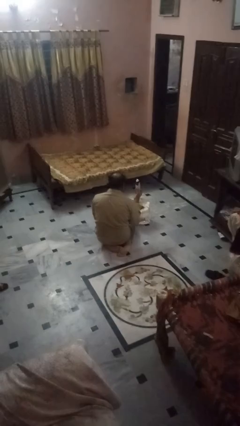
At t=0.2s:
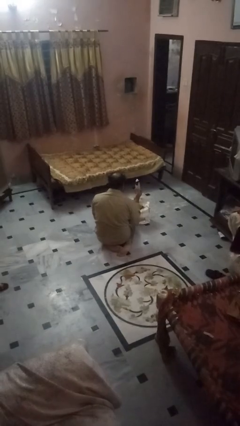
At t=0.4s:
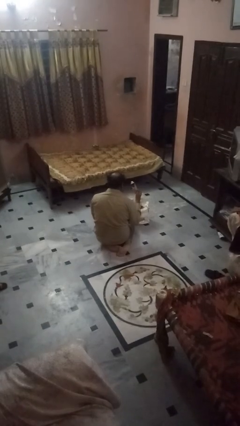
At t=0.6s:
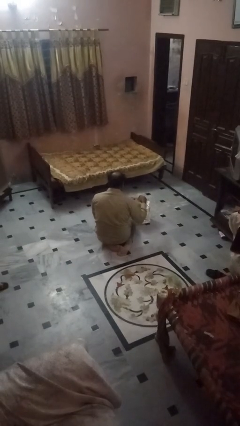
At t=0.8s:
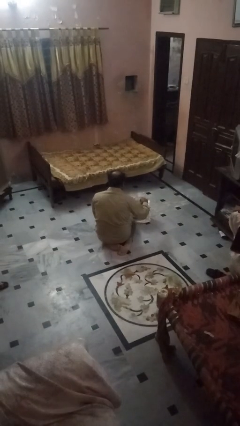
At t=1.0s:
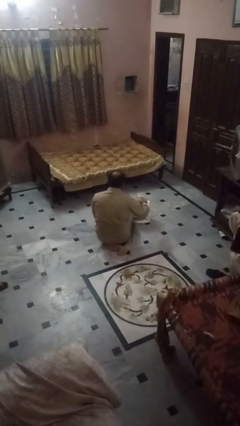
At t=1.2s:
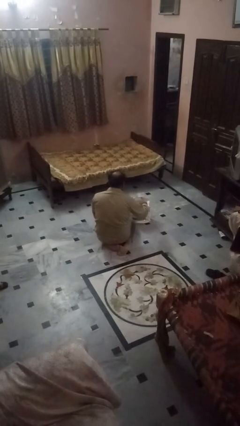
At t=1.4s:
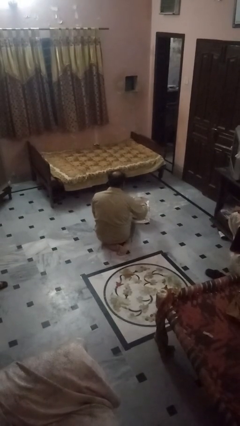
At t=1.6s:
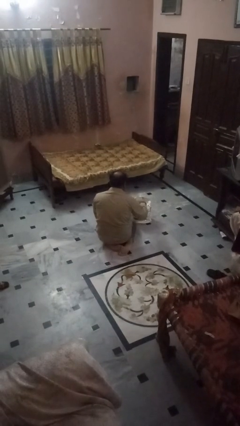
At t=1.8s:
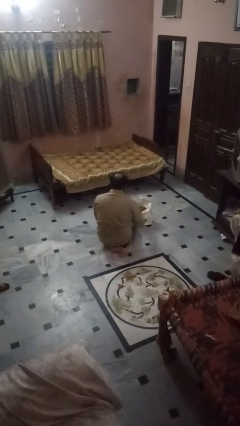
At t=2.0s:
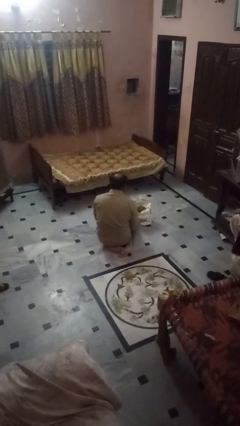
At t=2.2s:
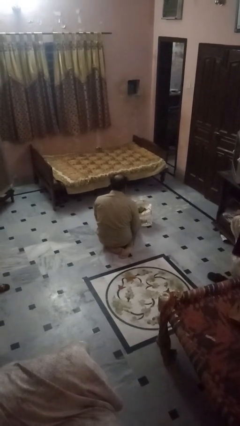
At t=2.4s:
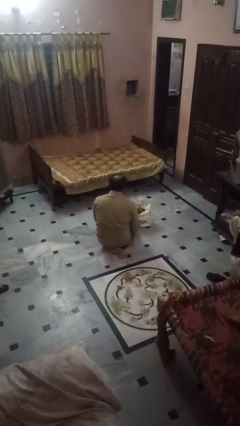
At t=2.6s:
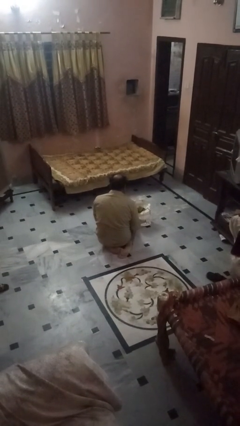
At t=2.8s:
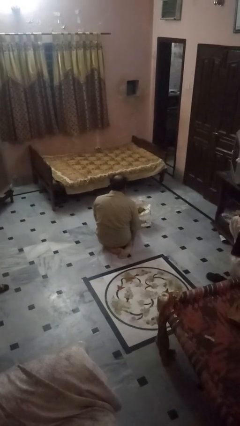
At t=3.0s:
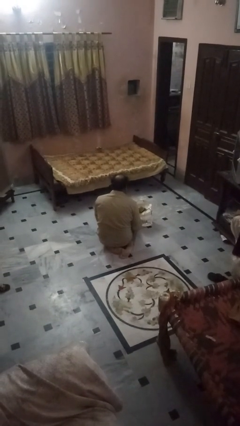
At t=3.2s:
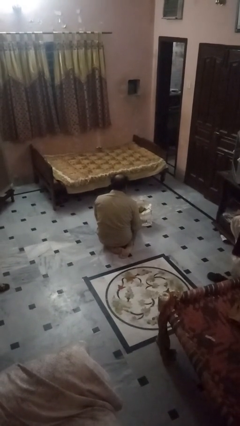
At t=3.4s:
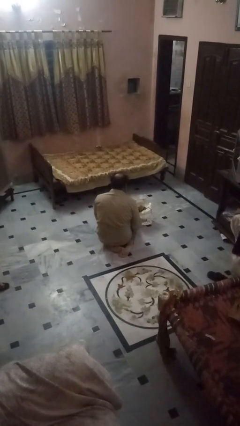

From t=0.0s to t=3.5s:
person puts object into bag

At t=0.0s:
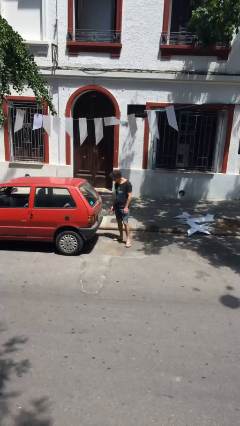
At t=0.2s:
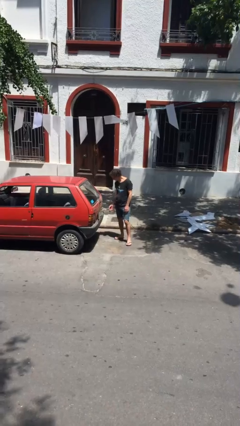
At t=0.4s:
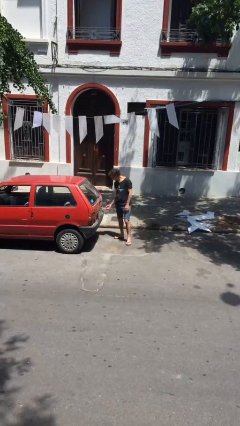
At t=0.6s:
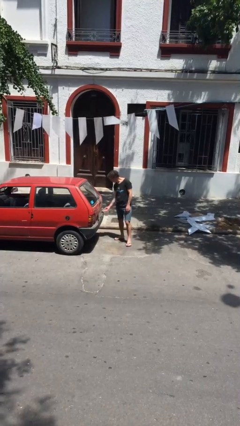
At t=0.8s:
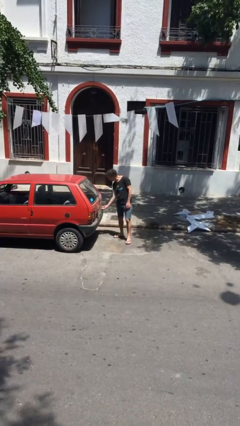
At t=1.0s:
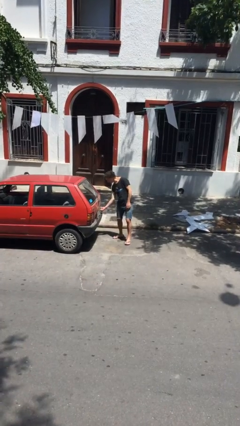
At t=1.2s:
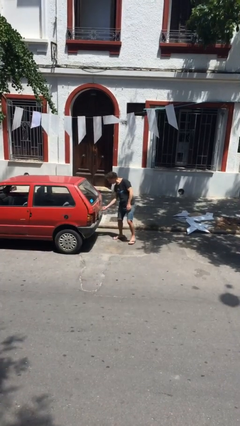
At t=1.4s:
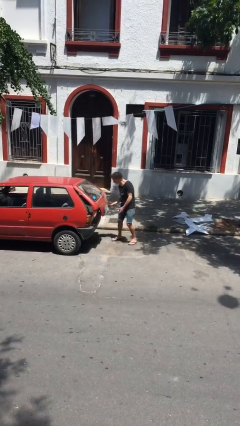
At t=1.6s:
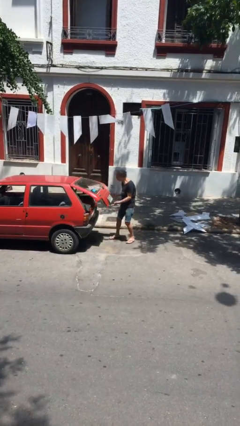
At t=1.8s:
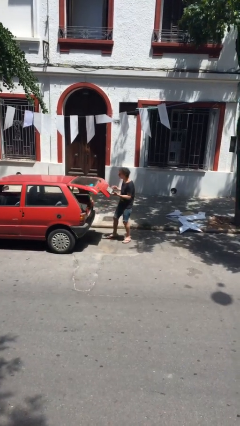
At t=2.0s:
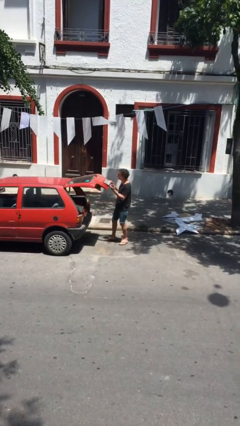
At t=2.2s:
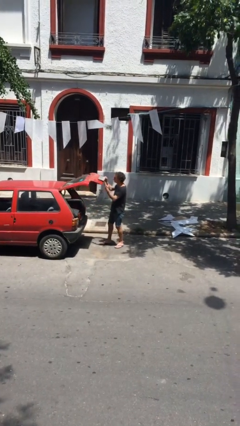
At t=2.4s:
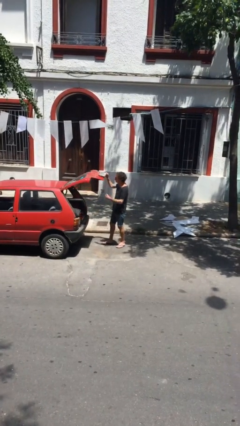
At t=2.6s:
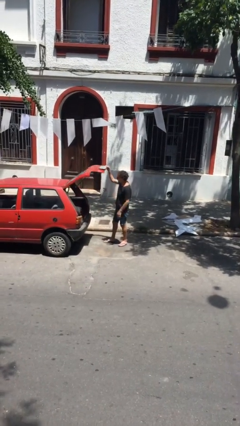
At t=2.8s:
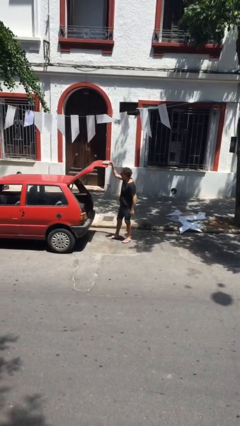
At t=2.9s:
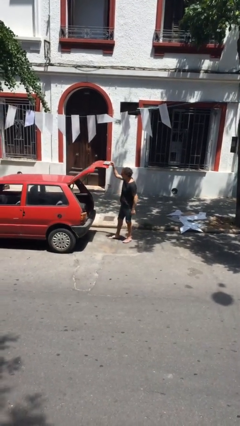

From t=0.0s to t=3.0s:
person opens car trunk

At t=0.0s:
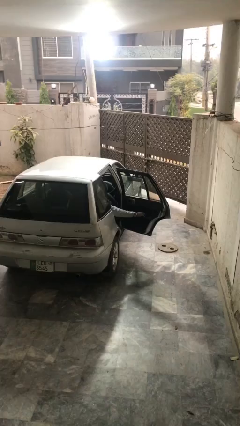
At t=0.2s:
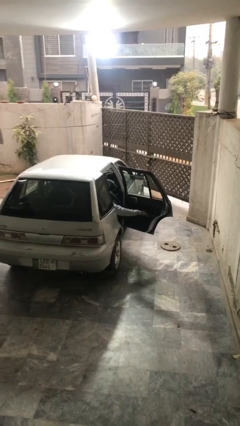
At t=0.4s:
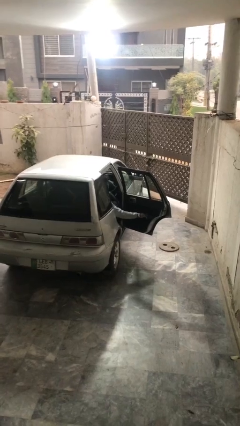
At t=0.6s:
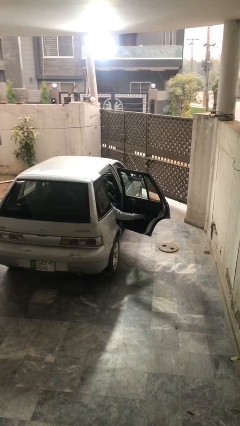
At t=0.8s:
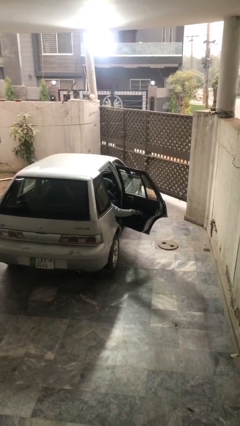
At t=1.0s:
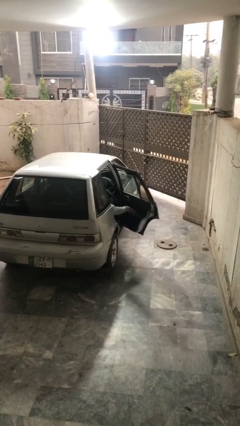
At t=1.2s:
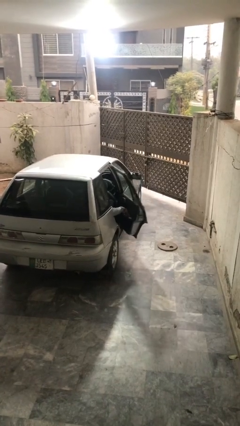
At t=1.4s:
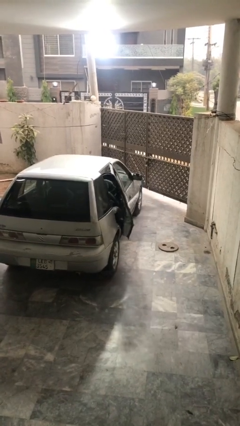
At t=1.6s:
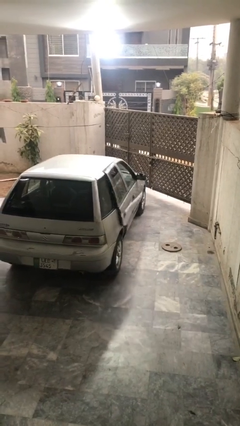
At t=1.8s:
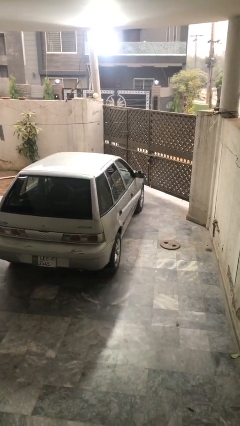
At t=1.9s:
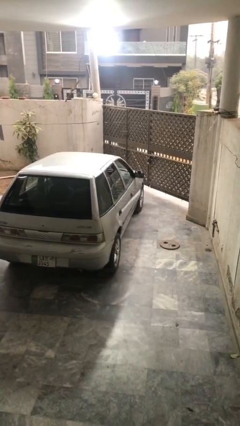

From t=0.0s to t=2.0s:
person closes car door

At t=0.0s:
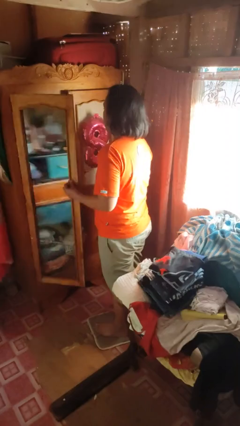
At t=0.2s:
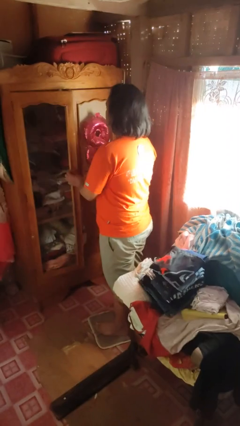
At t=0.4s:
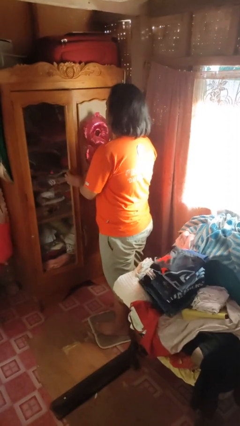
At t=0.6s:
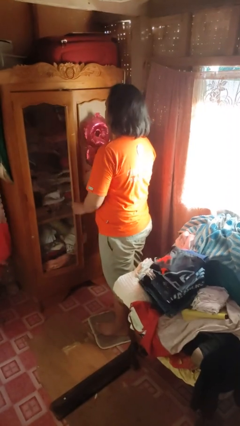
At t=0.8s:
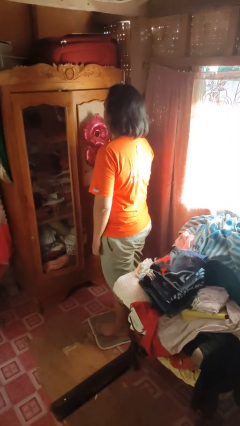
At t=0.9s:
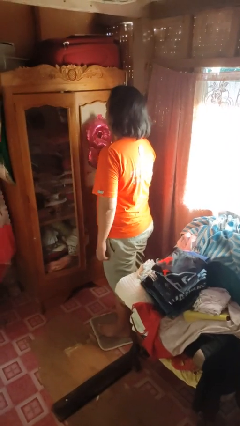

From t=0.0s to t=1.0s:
person closes dresser drawer

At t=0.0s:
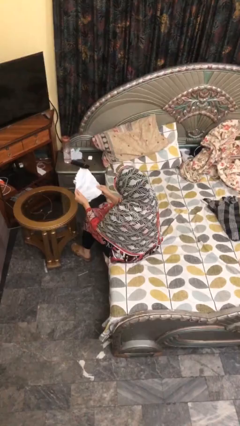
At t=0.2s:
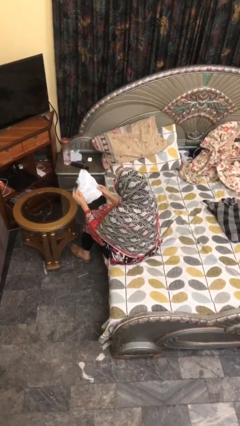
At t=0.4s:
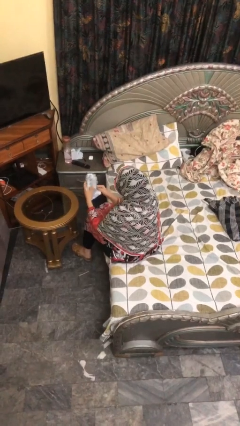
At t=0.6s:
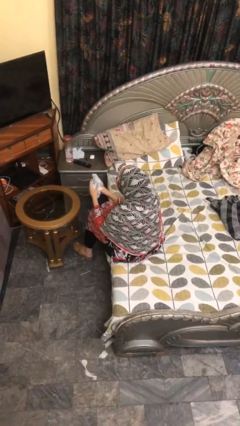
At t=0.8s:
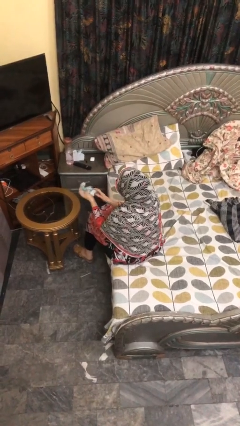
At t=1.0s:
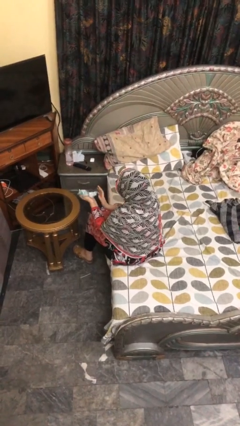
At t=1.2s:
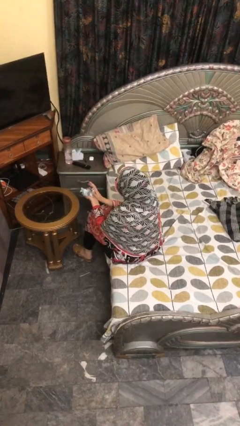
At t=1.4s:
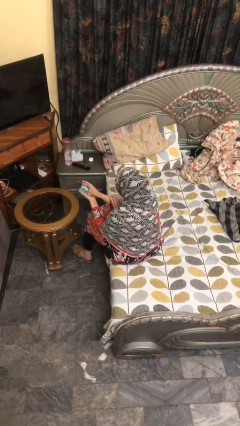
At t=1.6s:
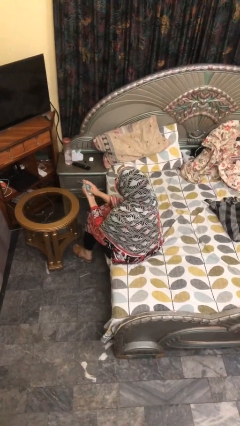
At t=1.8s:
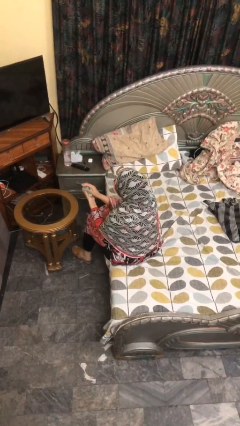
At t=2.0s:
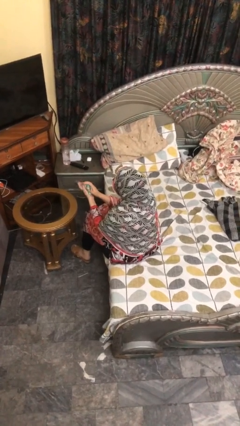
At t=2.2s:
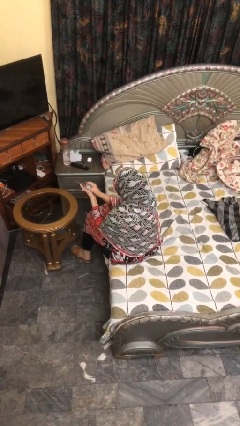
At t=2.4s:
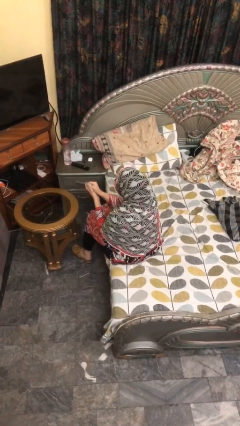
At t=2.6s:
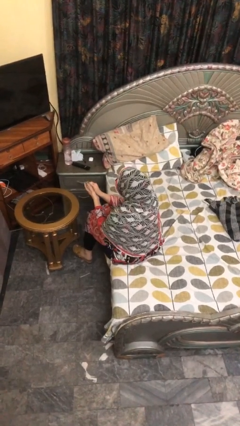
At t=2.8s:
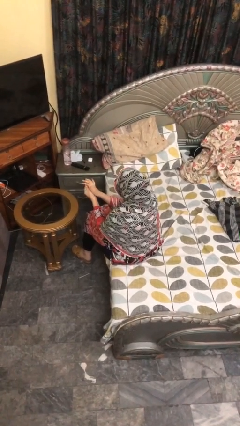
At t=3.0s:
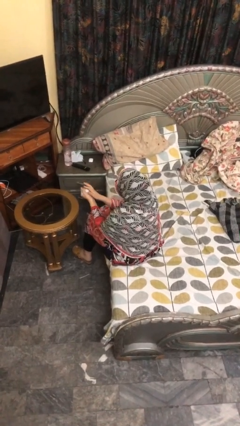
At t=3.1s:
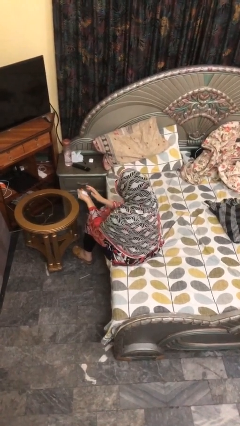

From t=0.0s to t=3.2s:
person crumples paper

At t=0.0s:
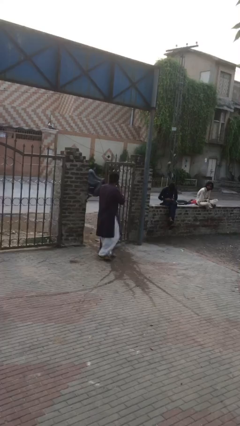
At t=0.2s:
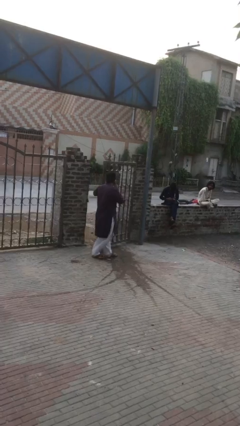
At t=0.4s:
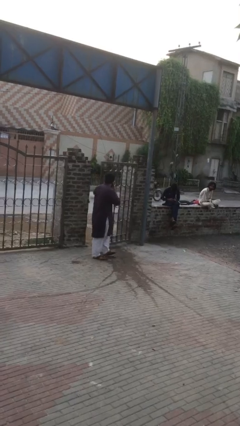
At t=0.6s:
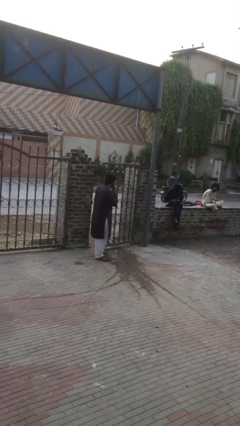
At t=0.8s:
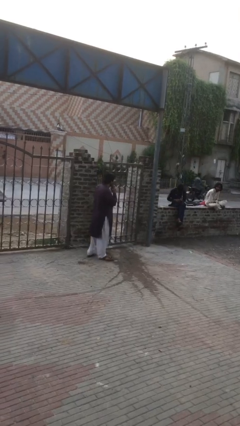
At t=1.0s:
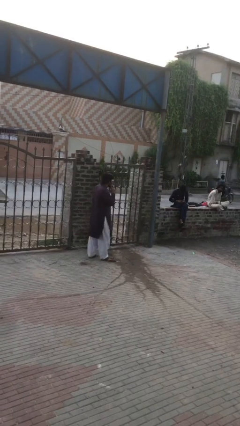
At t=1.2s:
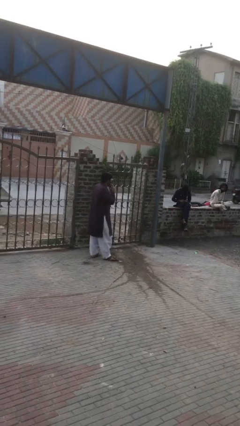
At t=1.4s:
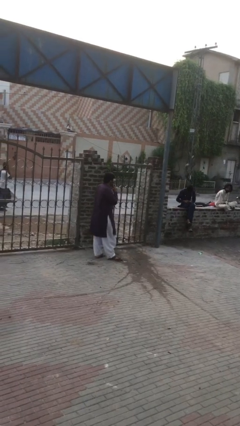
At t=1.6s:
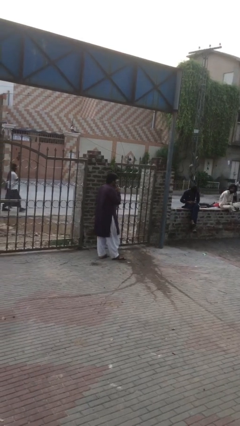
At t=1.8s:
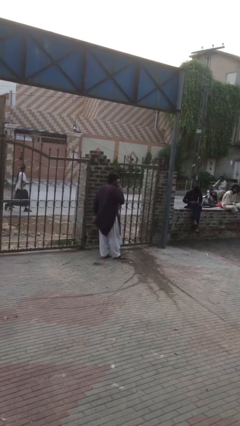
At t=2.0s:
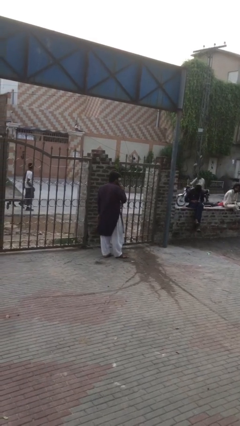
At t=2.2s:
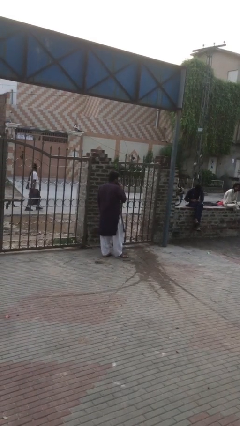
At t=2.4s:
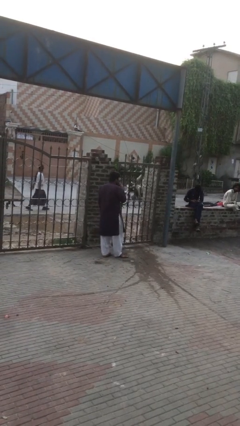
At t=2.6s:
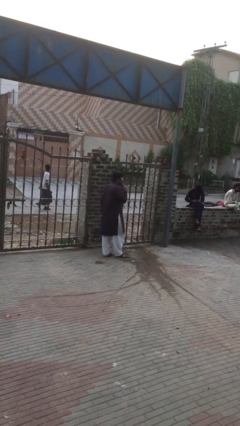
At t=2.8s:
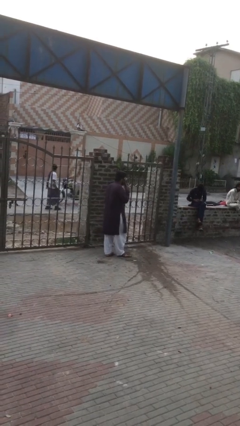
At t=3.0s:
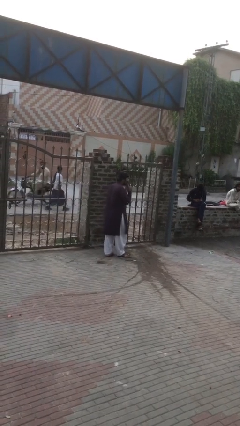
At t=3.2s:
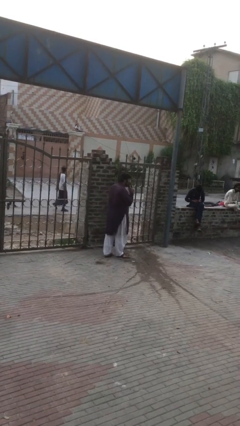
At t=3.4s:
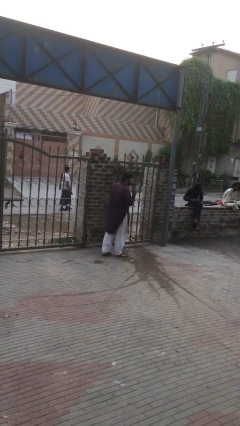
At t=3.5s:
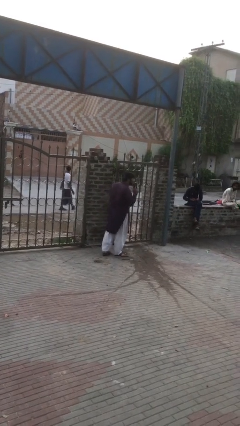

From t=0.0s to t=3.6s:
person closes facility door

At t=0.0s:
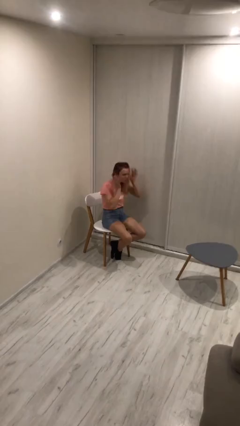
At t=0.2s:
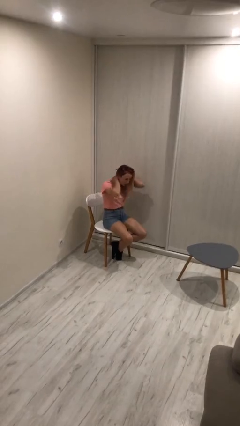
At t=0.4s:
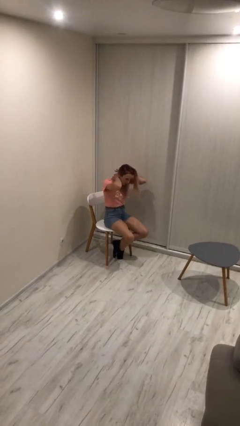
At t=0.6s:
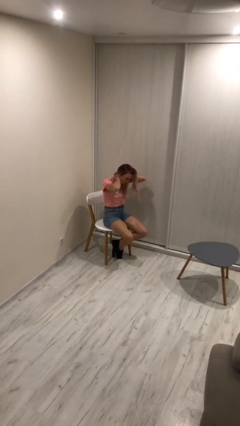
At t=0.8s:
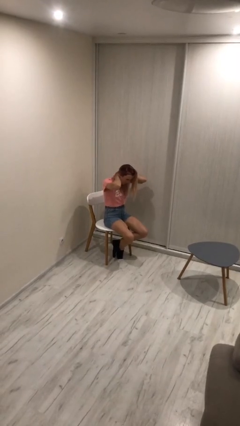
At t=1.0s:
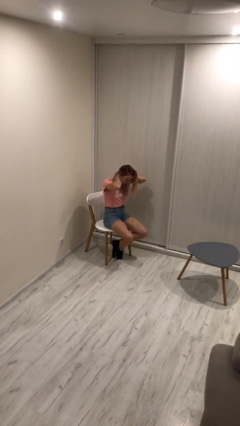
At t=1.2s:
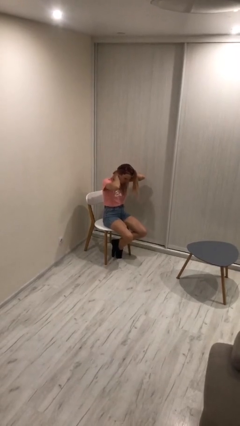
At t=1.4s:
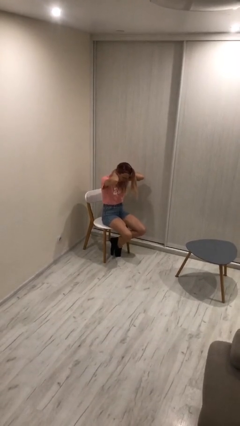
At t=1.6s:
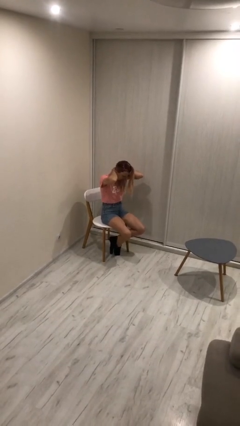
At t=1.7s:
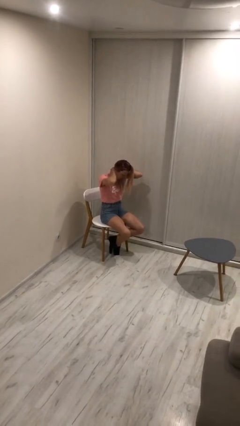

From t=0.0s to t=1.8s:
person rubs neck
